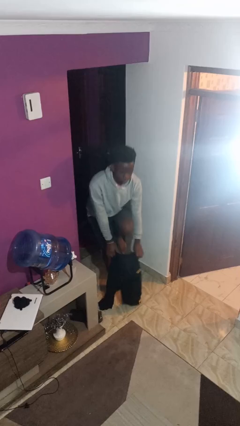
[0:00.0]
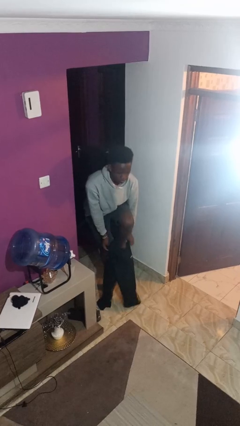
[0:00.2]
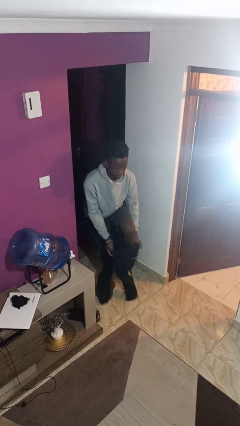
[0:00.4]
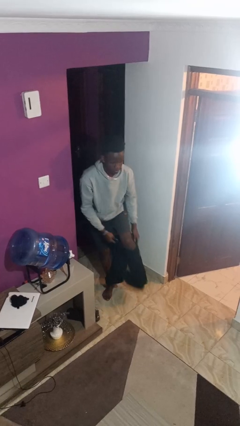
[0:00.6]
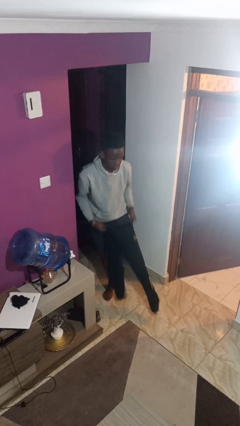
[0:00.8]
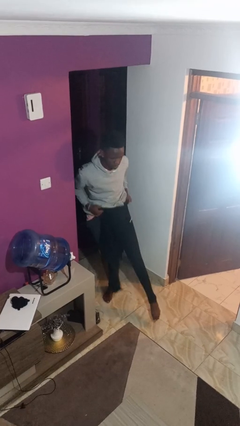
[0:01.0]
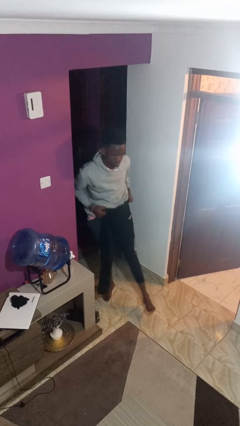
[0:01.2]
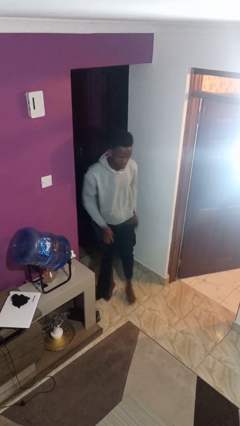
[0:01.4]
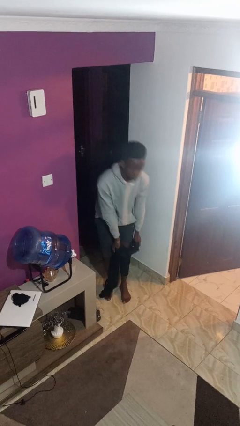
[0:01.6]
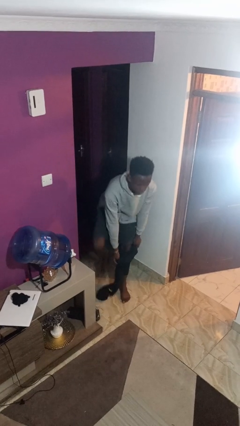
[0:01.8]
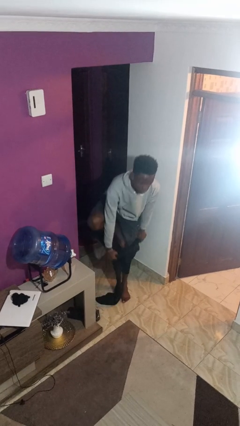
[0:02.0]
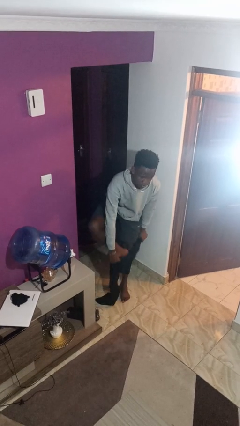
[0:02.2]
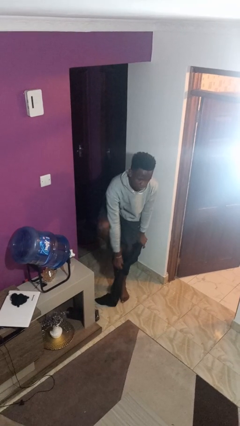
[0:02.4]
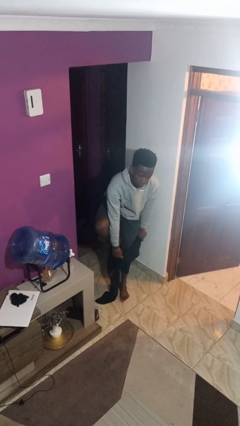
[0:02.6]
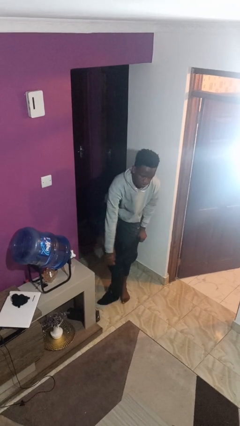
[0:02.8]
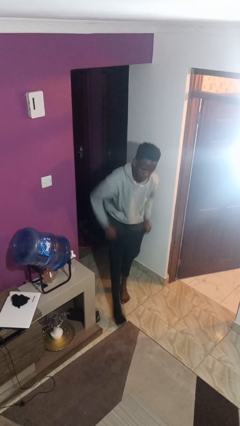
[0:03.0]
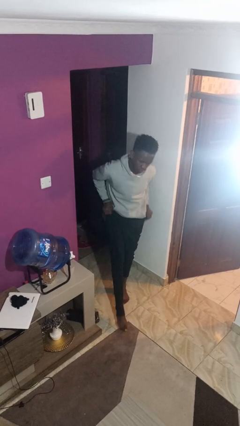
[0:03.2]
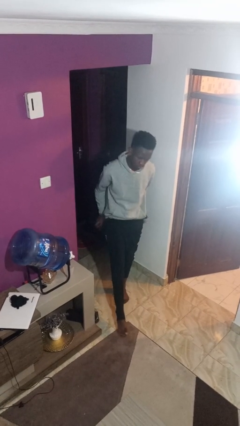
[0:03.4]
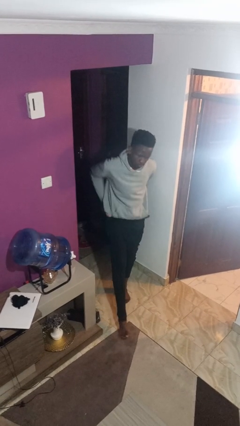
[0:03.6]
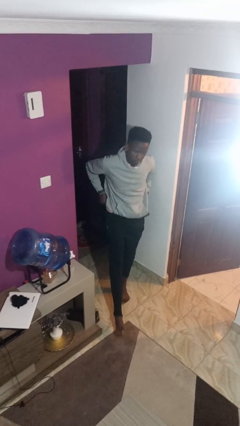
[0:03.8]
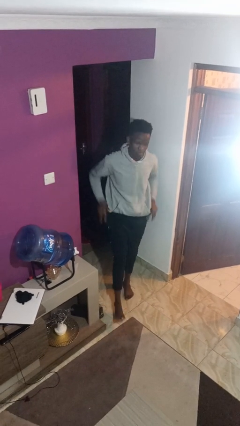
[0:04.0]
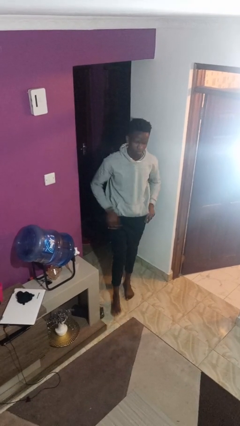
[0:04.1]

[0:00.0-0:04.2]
person puts on pants

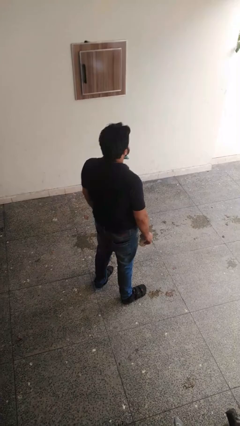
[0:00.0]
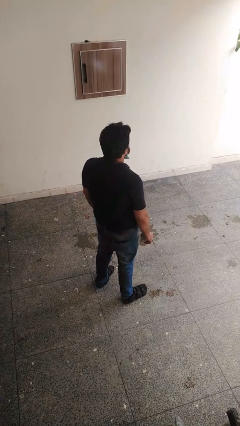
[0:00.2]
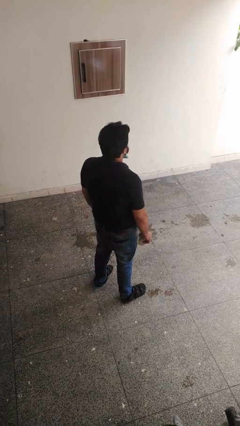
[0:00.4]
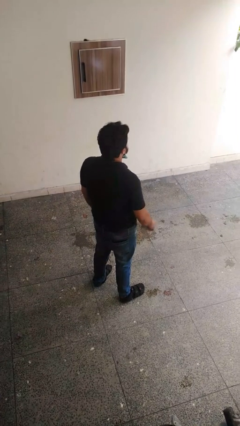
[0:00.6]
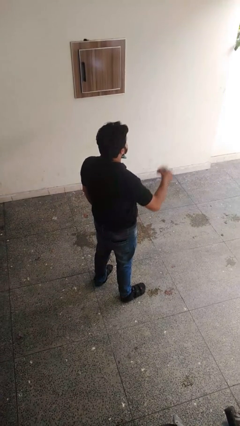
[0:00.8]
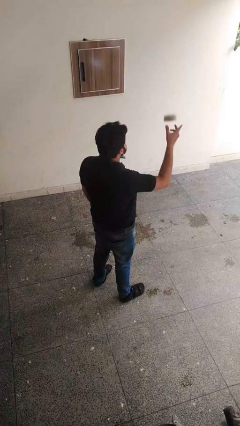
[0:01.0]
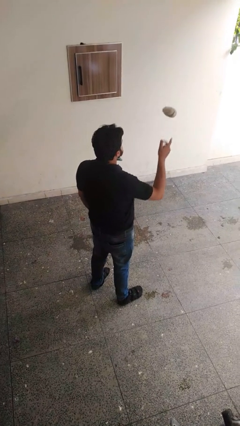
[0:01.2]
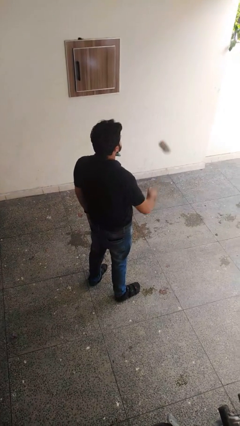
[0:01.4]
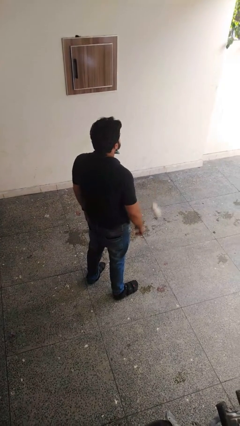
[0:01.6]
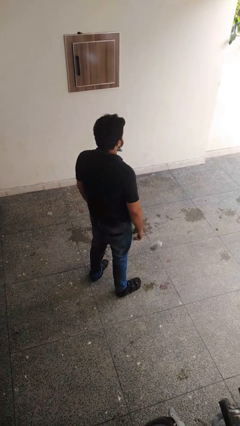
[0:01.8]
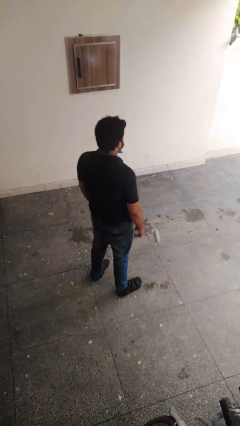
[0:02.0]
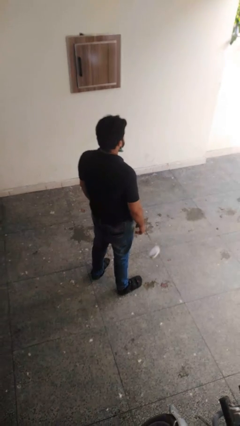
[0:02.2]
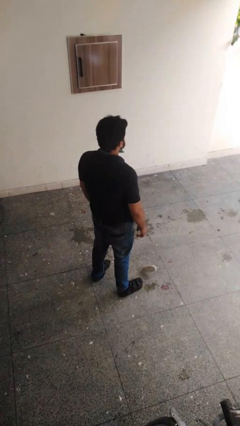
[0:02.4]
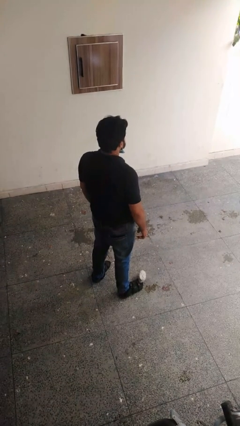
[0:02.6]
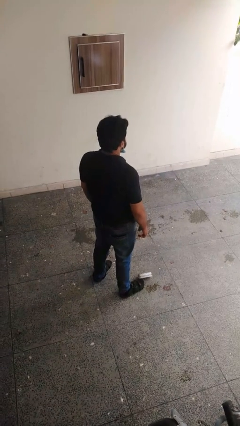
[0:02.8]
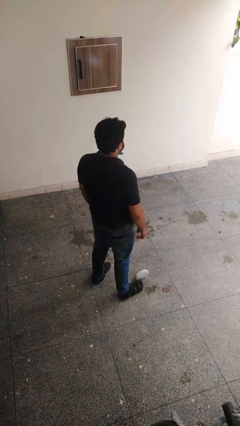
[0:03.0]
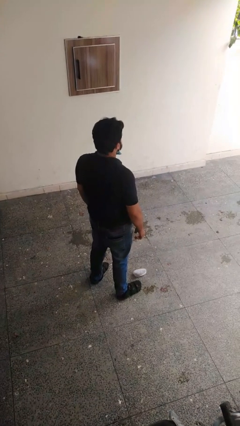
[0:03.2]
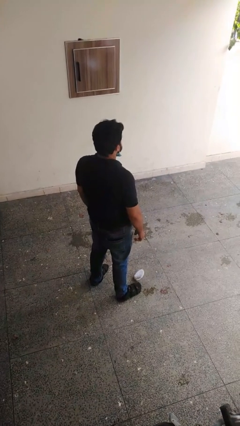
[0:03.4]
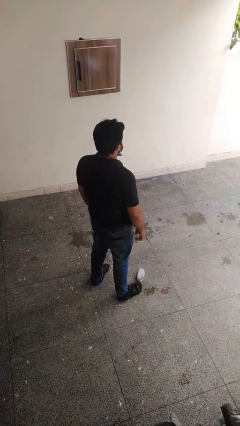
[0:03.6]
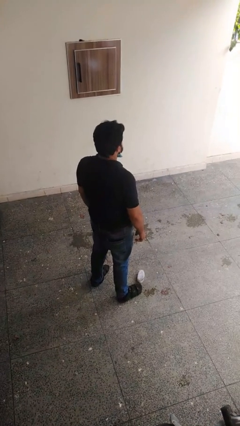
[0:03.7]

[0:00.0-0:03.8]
person throws object into air

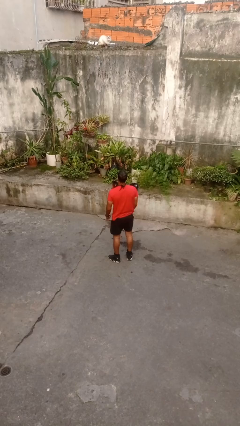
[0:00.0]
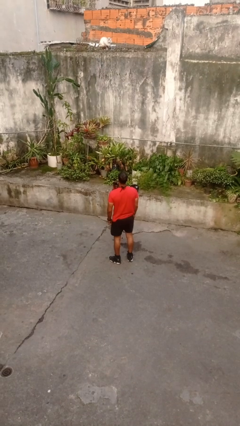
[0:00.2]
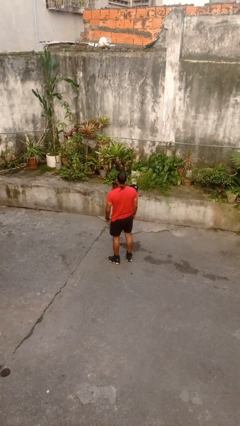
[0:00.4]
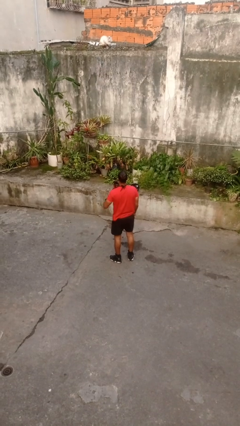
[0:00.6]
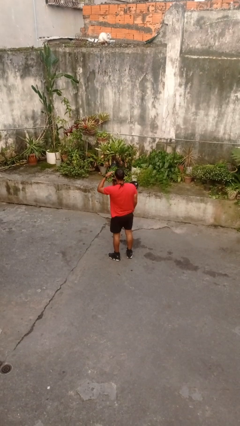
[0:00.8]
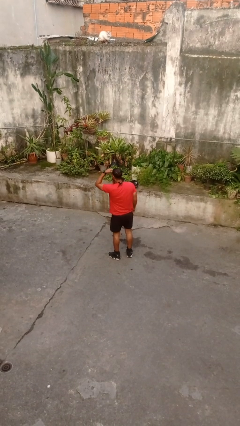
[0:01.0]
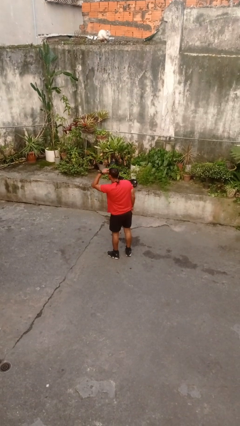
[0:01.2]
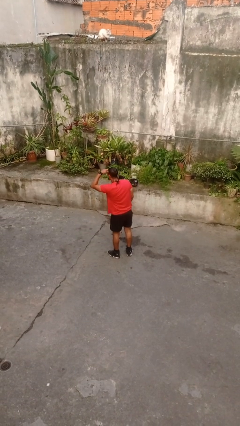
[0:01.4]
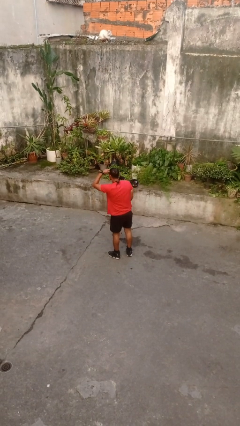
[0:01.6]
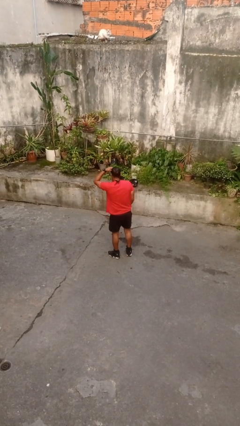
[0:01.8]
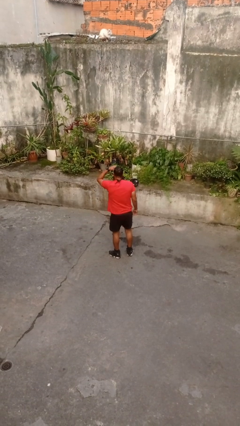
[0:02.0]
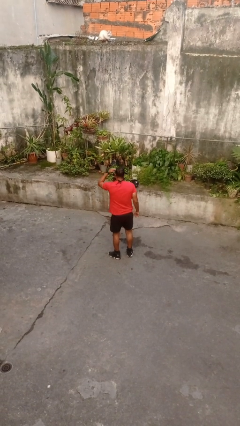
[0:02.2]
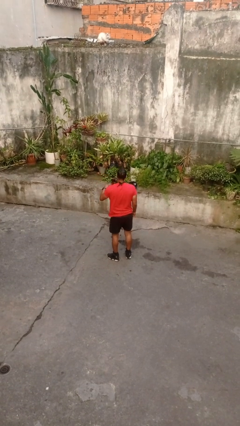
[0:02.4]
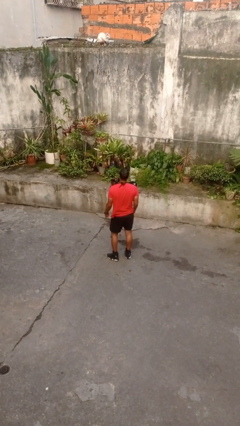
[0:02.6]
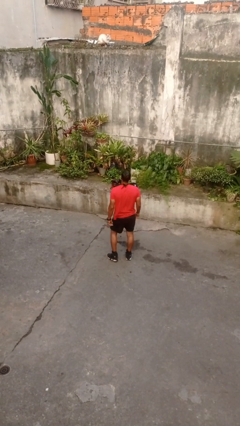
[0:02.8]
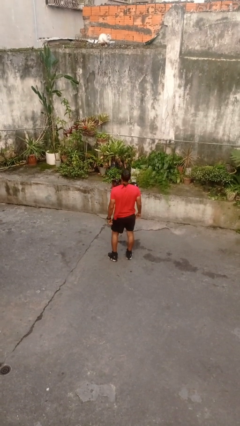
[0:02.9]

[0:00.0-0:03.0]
person shades eyes

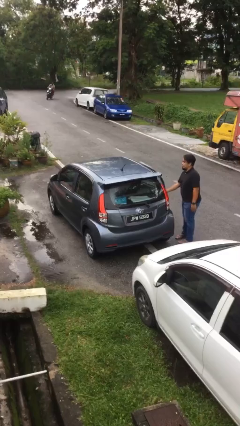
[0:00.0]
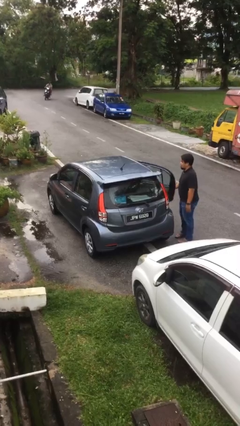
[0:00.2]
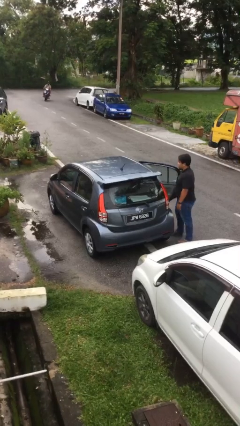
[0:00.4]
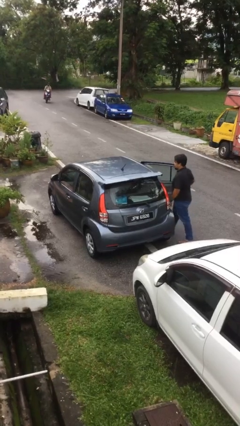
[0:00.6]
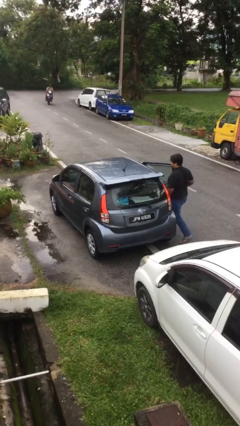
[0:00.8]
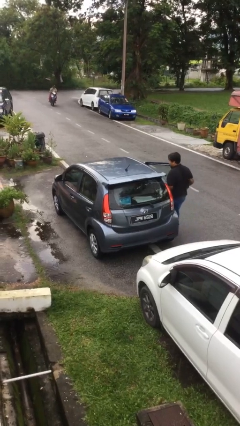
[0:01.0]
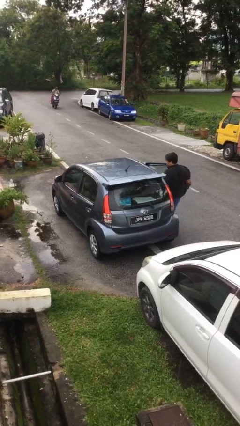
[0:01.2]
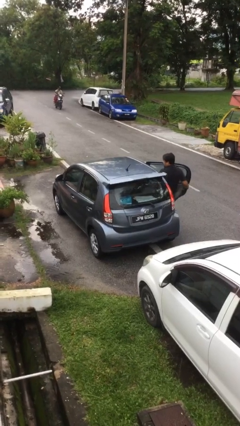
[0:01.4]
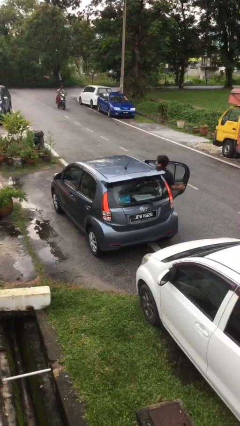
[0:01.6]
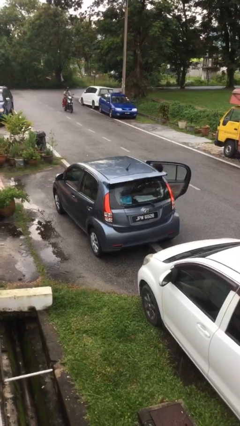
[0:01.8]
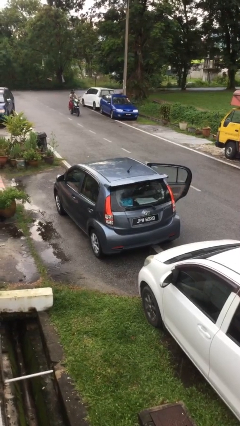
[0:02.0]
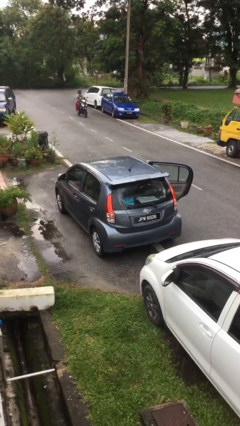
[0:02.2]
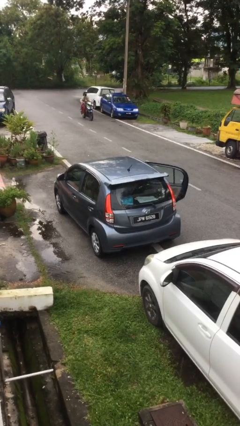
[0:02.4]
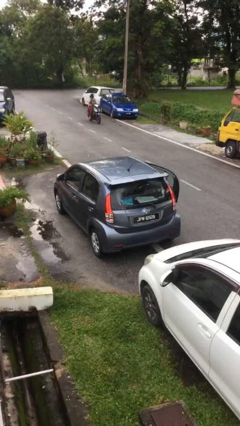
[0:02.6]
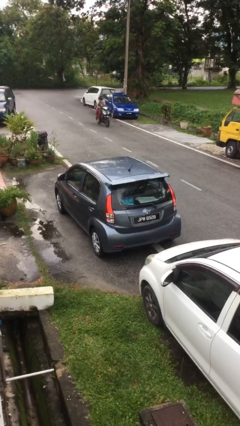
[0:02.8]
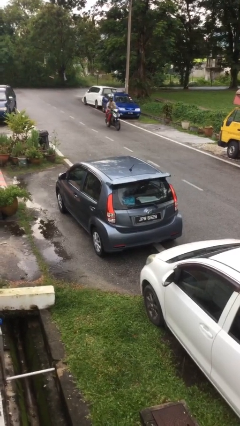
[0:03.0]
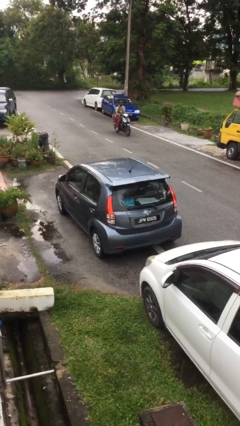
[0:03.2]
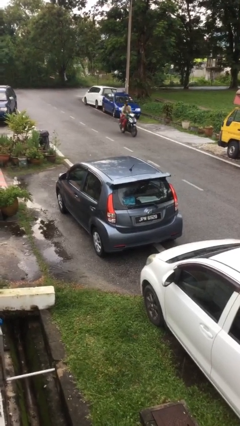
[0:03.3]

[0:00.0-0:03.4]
car picks up person

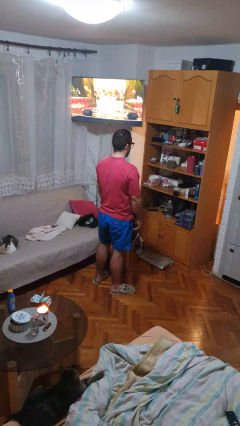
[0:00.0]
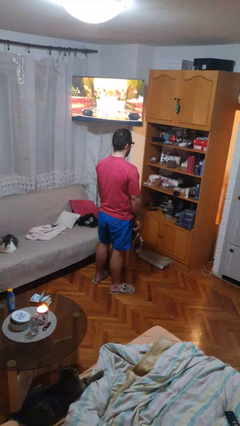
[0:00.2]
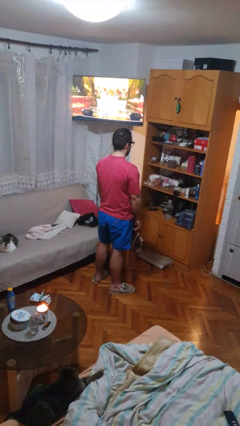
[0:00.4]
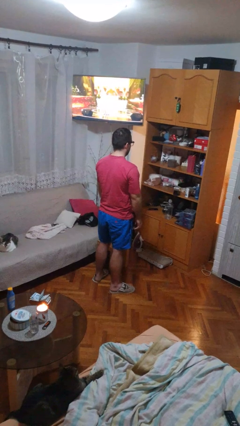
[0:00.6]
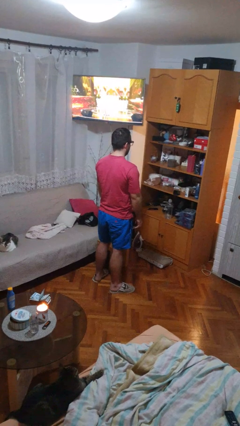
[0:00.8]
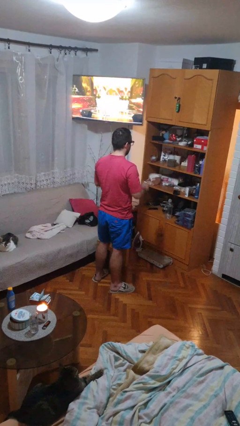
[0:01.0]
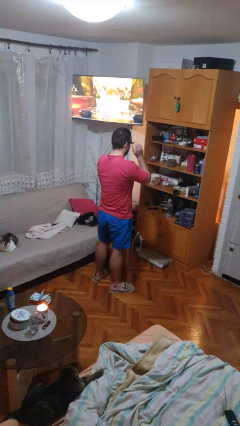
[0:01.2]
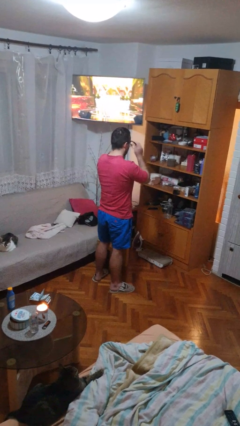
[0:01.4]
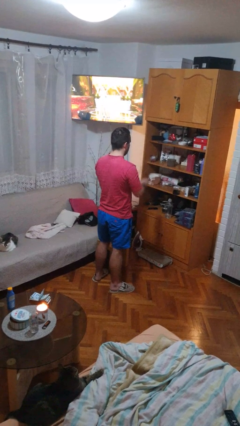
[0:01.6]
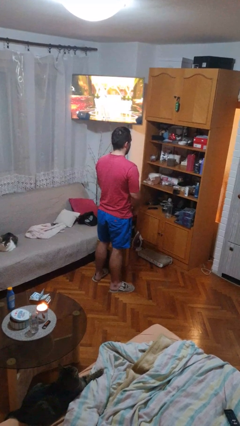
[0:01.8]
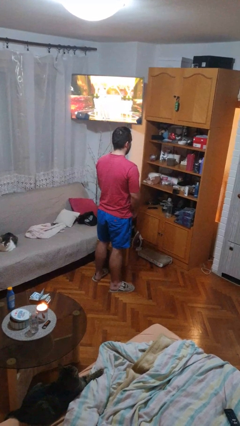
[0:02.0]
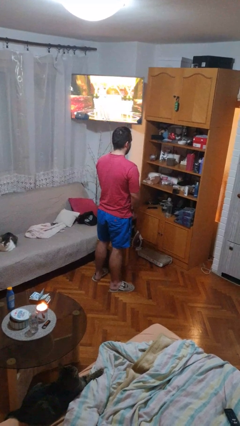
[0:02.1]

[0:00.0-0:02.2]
person takes off glasses

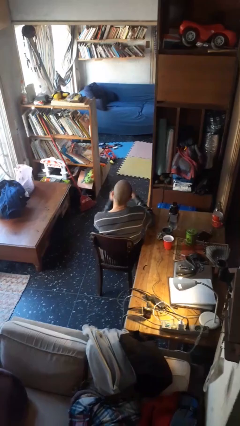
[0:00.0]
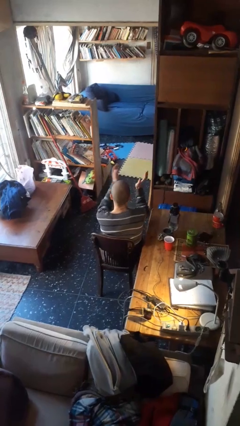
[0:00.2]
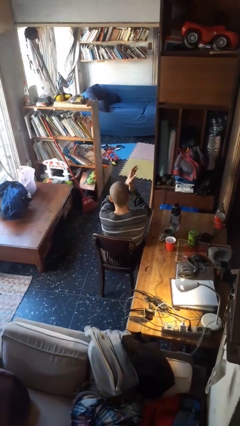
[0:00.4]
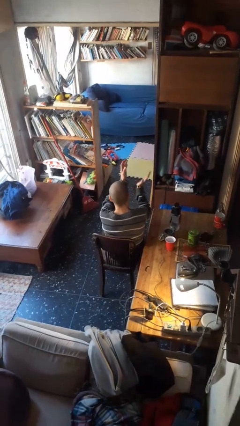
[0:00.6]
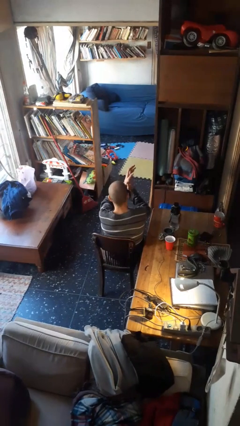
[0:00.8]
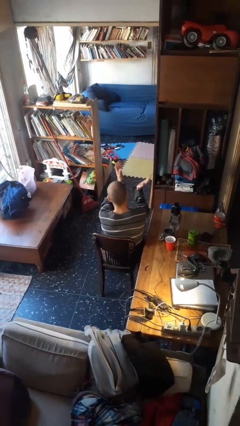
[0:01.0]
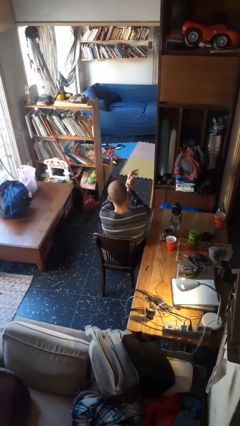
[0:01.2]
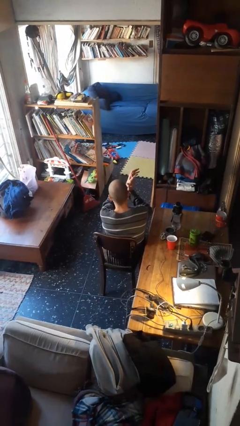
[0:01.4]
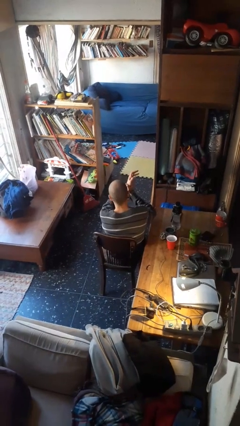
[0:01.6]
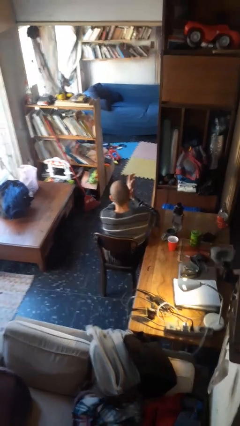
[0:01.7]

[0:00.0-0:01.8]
person claps hands
